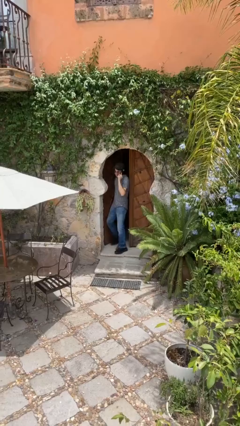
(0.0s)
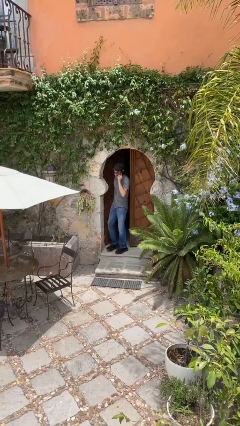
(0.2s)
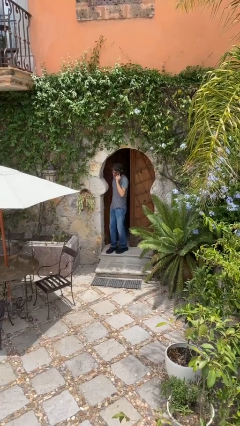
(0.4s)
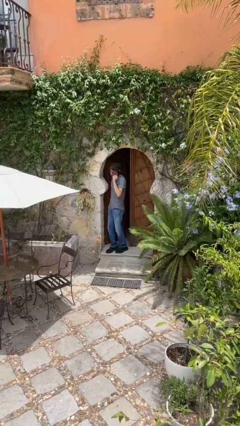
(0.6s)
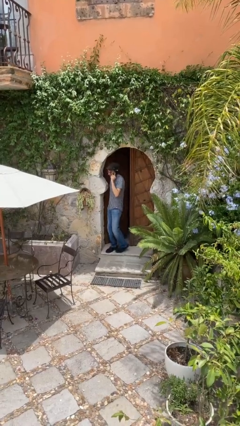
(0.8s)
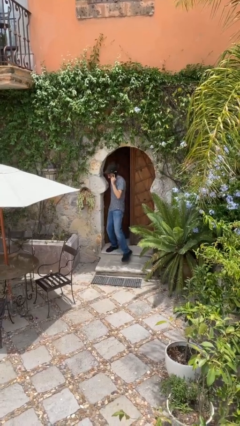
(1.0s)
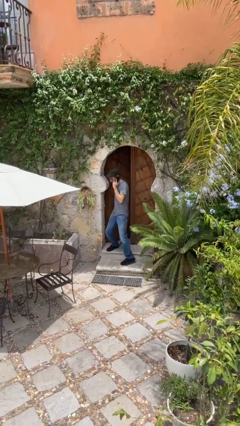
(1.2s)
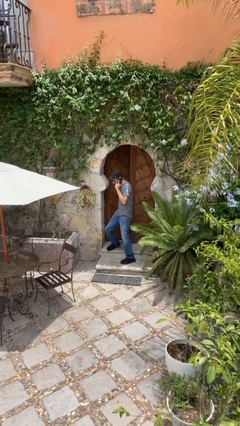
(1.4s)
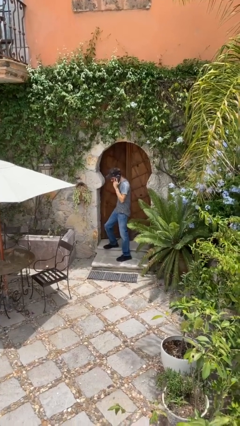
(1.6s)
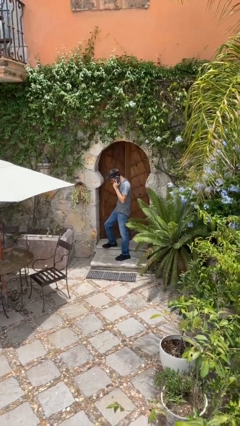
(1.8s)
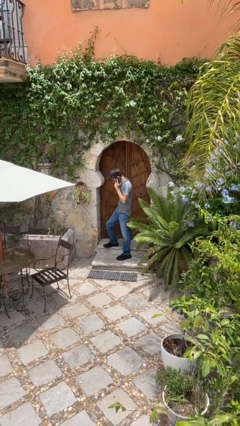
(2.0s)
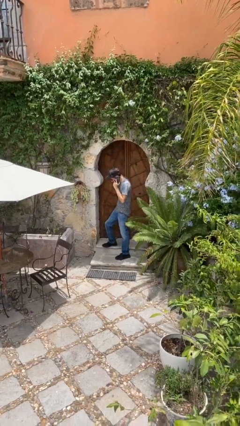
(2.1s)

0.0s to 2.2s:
person enters scene through structure

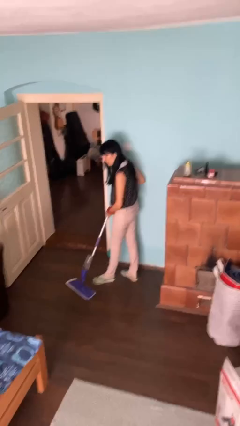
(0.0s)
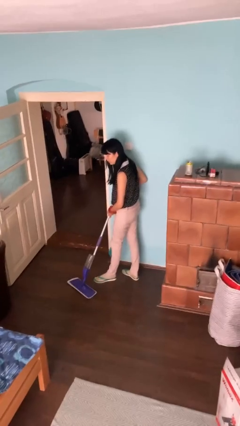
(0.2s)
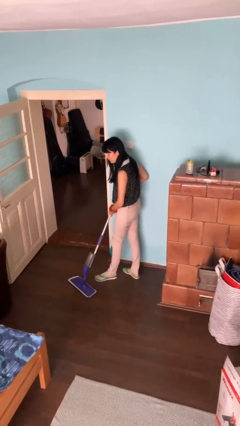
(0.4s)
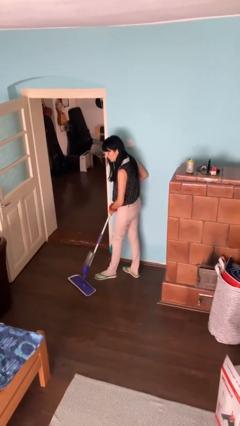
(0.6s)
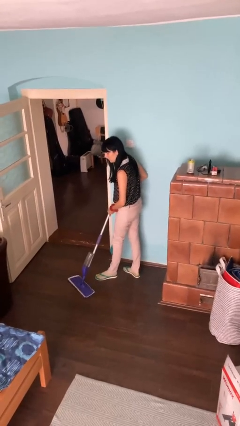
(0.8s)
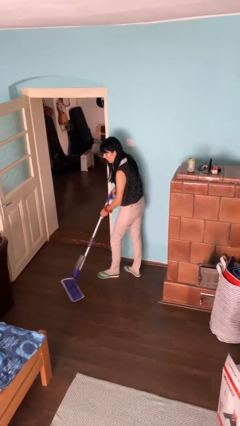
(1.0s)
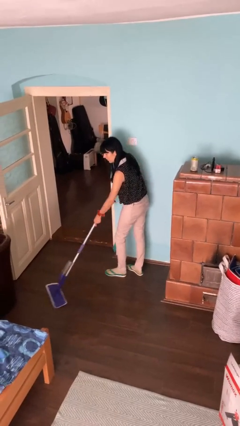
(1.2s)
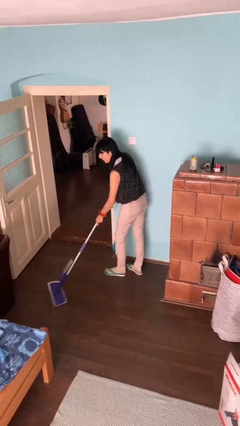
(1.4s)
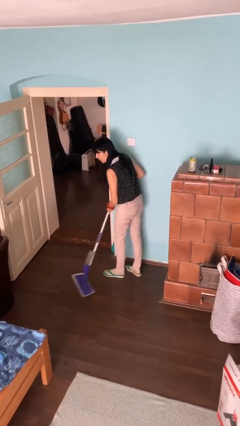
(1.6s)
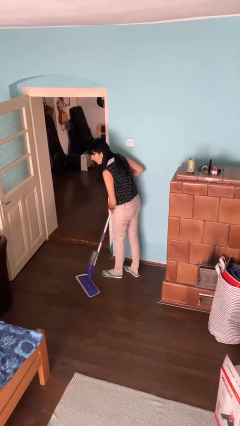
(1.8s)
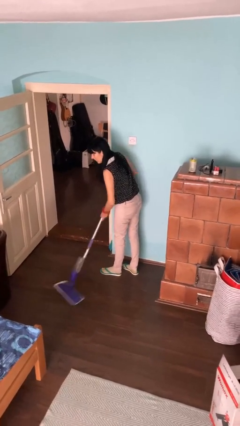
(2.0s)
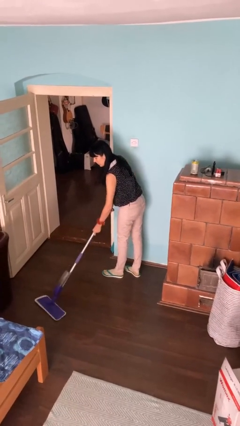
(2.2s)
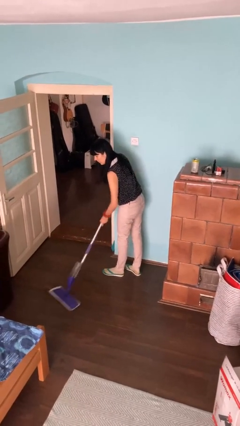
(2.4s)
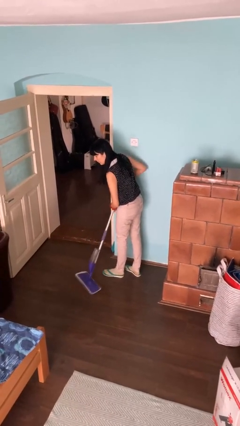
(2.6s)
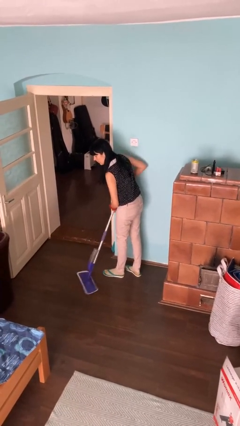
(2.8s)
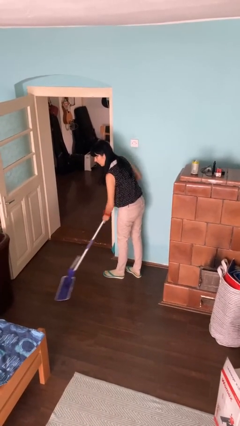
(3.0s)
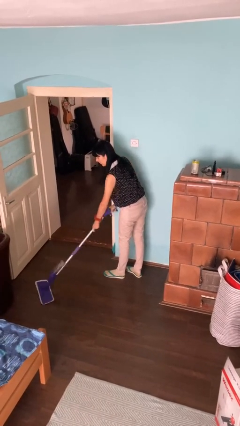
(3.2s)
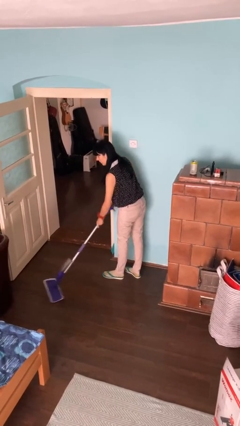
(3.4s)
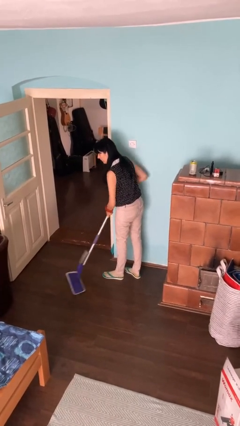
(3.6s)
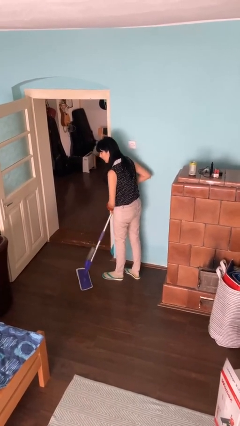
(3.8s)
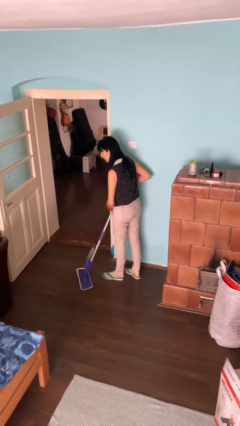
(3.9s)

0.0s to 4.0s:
person mops

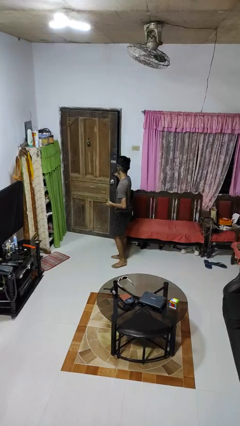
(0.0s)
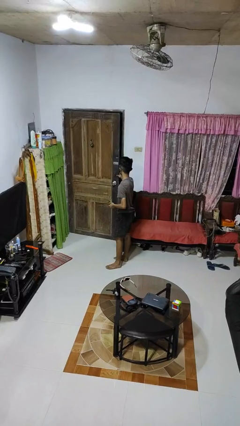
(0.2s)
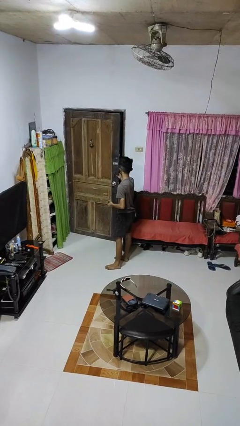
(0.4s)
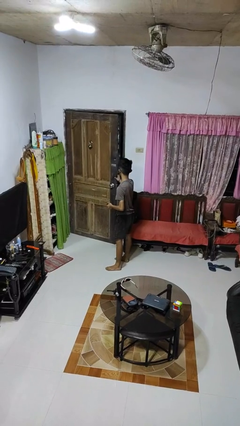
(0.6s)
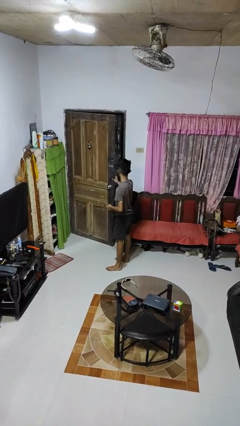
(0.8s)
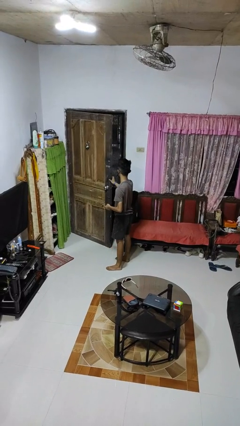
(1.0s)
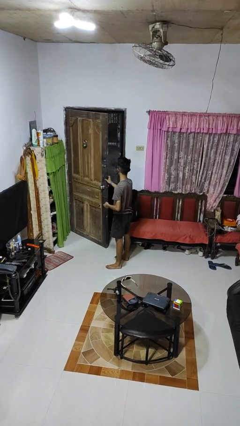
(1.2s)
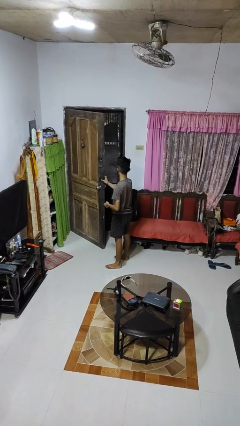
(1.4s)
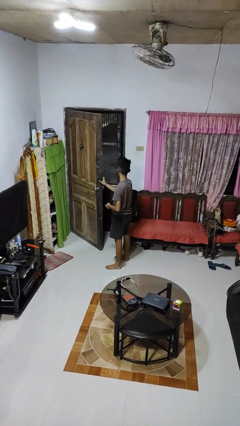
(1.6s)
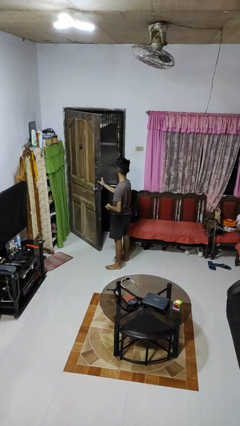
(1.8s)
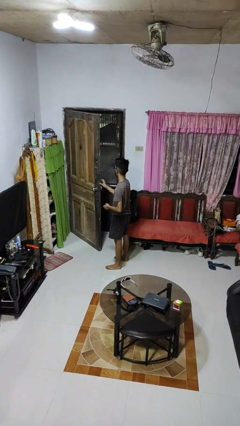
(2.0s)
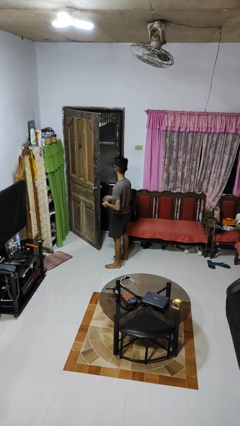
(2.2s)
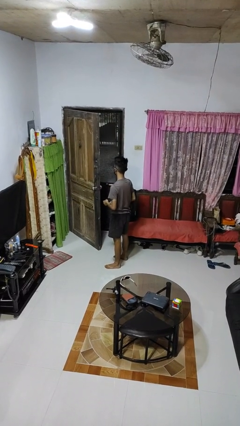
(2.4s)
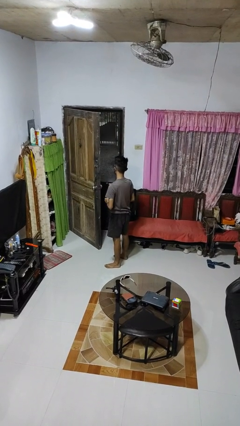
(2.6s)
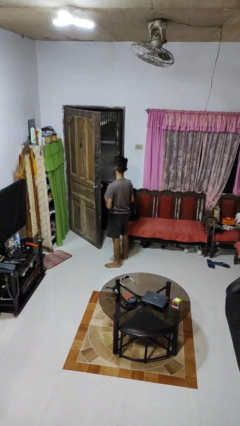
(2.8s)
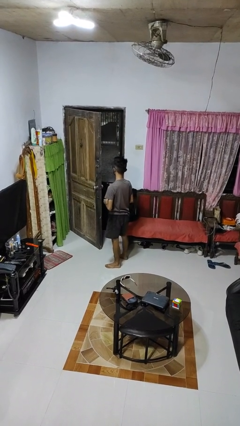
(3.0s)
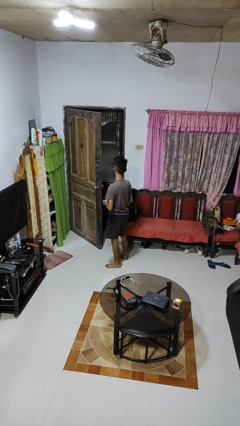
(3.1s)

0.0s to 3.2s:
person opens facility door

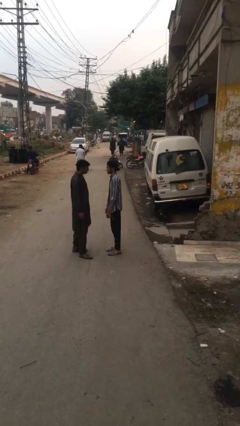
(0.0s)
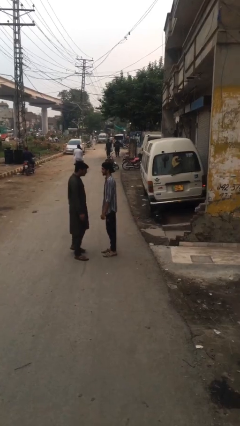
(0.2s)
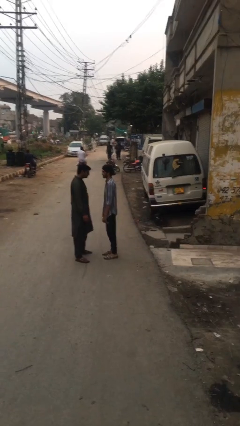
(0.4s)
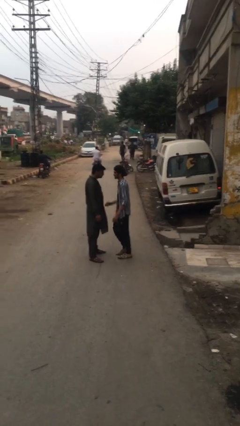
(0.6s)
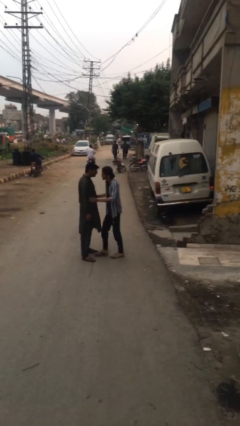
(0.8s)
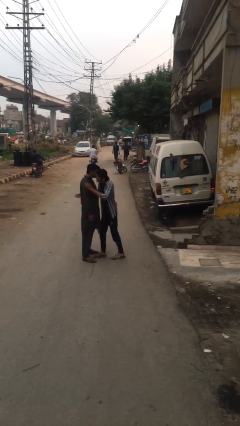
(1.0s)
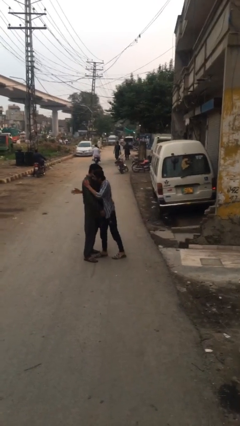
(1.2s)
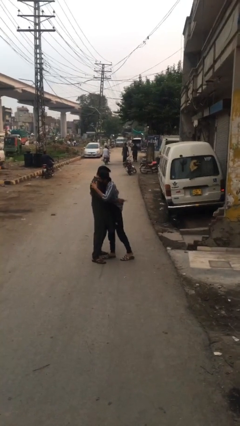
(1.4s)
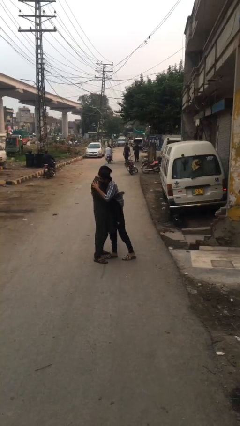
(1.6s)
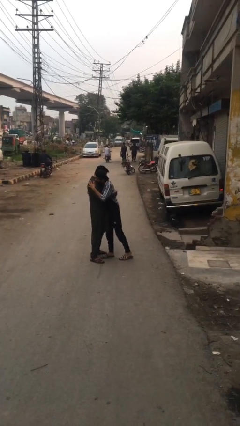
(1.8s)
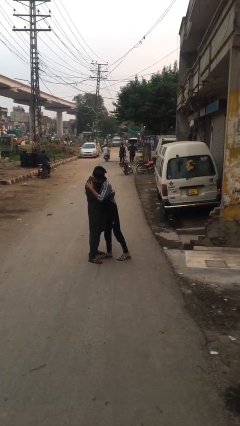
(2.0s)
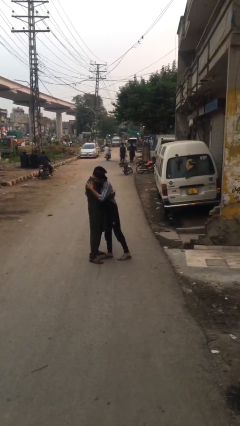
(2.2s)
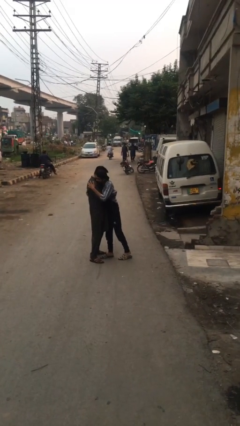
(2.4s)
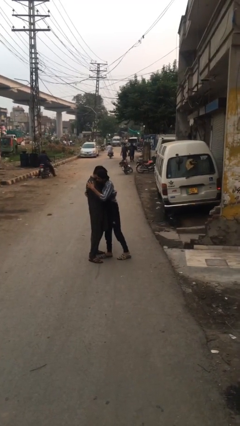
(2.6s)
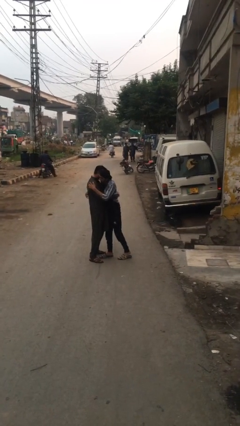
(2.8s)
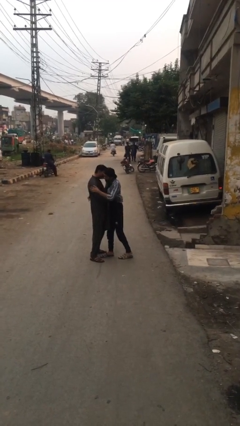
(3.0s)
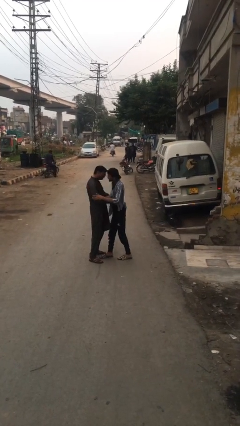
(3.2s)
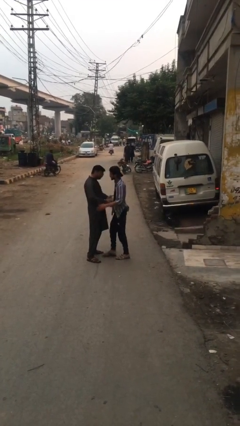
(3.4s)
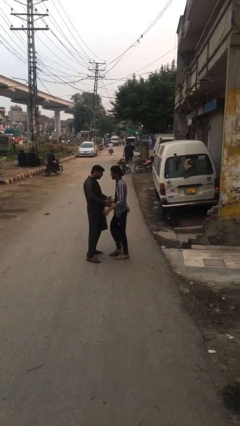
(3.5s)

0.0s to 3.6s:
person embraces person

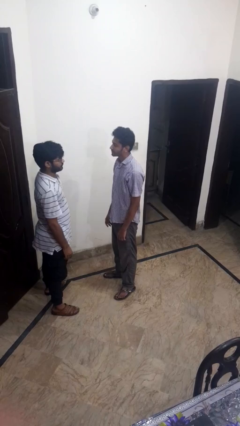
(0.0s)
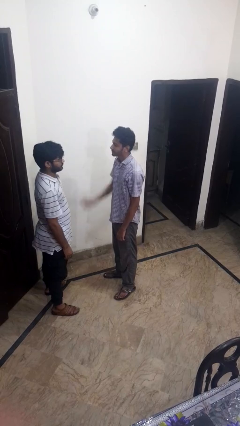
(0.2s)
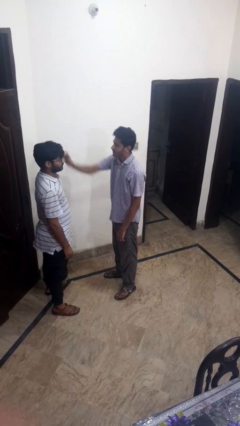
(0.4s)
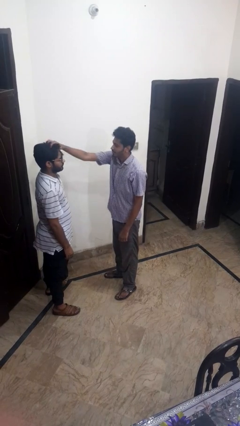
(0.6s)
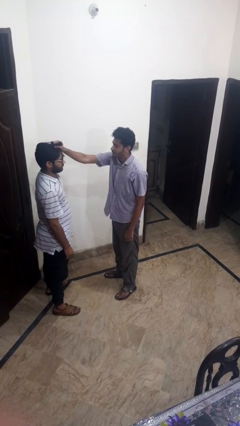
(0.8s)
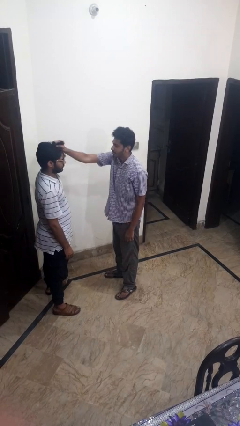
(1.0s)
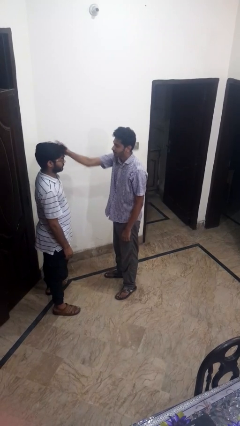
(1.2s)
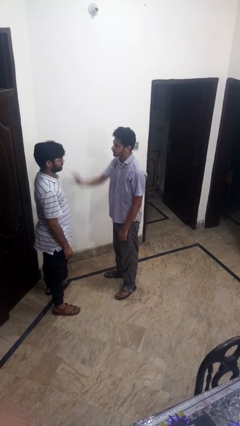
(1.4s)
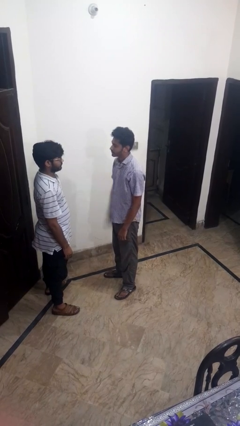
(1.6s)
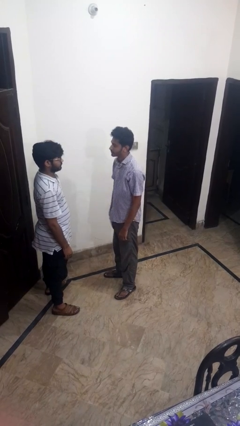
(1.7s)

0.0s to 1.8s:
person grabs person by hair

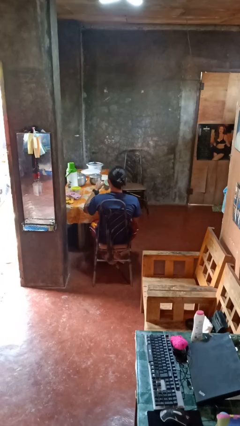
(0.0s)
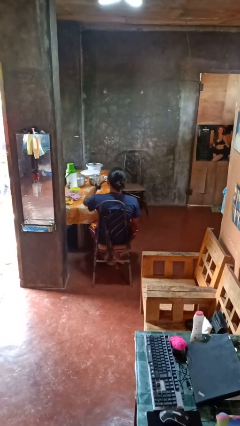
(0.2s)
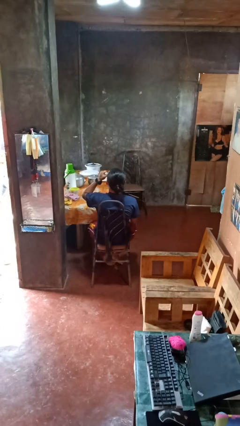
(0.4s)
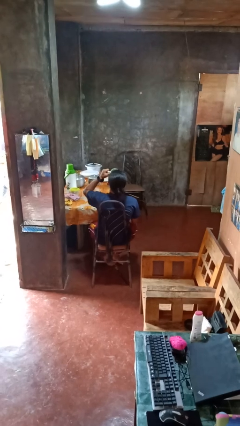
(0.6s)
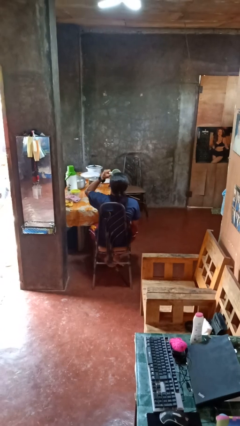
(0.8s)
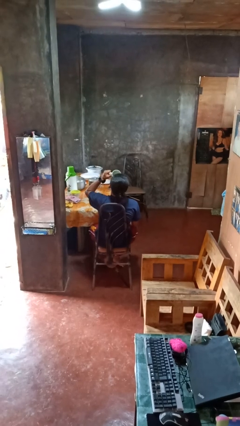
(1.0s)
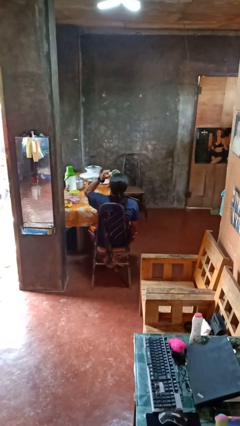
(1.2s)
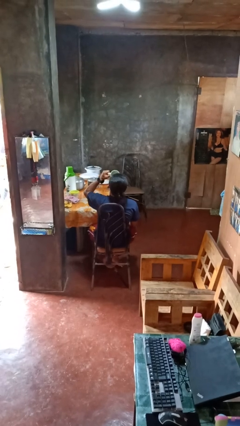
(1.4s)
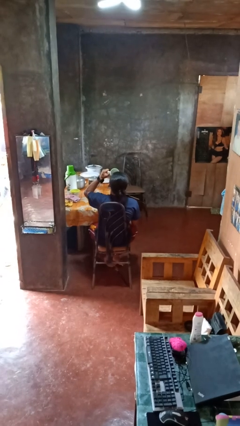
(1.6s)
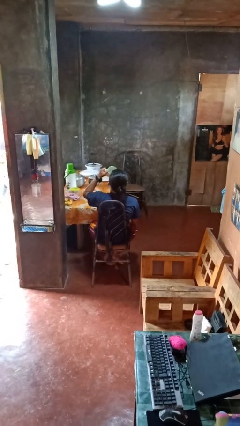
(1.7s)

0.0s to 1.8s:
person drinks from mug

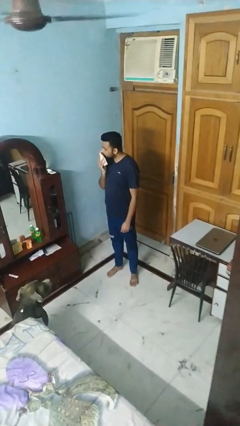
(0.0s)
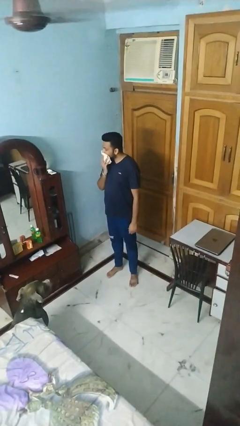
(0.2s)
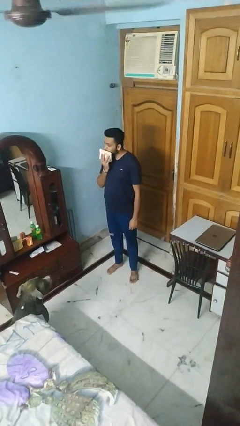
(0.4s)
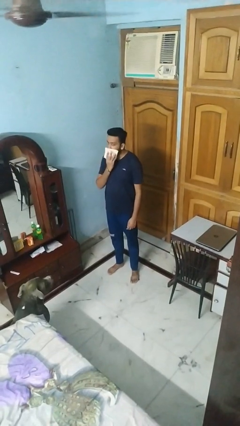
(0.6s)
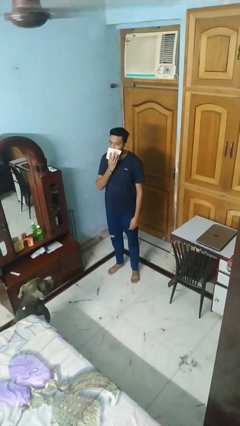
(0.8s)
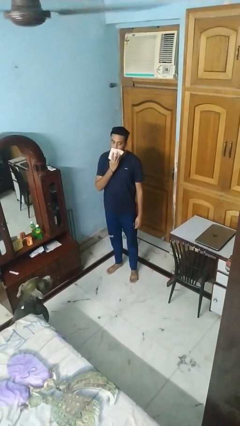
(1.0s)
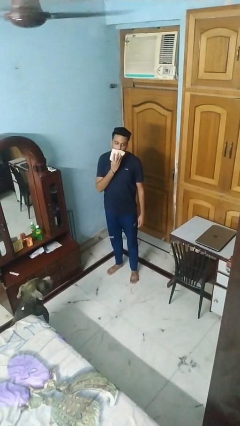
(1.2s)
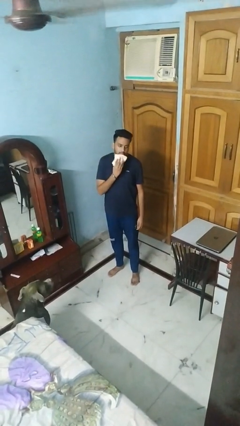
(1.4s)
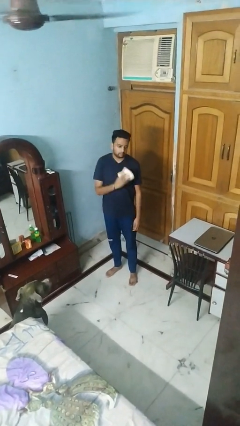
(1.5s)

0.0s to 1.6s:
person wipes mouth with napkin
